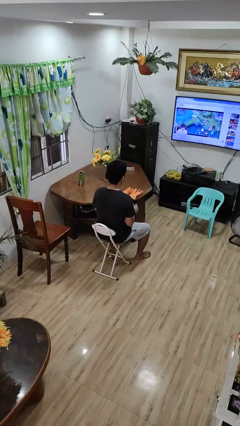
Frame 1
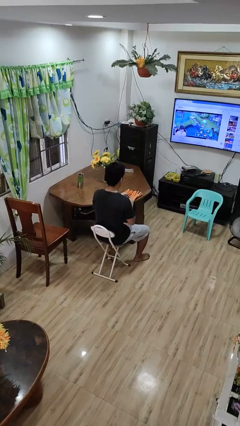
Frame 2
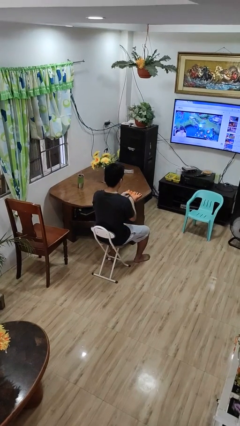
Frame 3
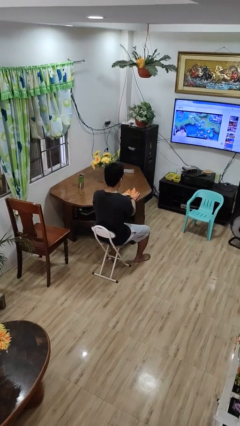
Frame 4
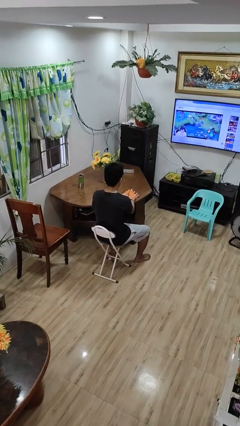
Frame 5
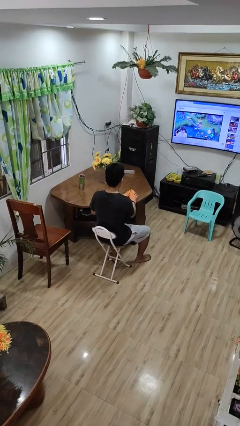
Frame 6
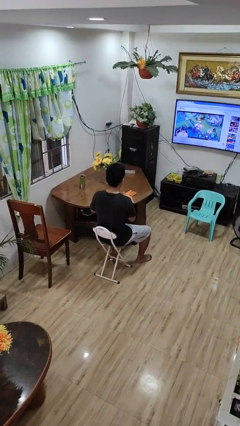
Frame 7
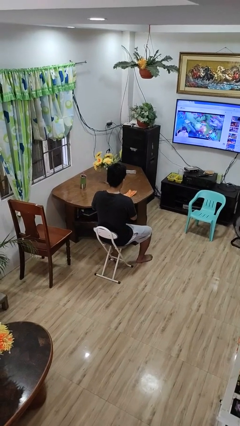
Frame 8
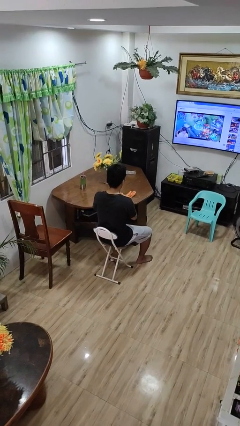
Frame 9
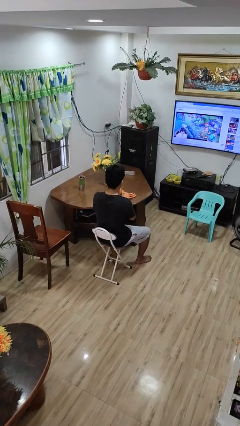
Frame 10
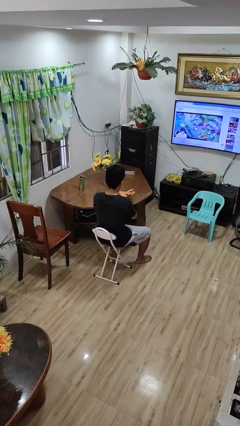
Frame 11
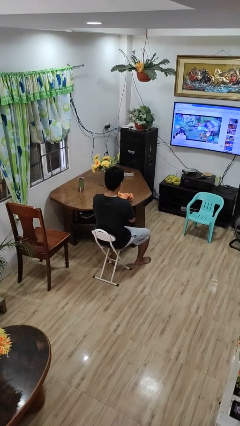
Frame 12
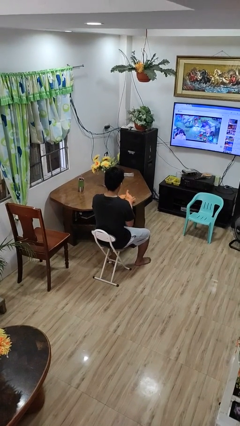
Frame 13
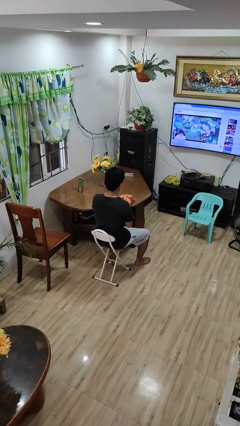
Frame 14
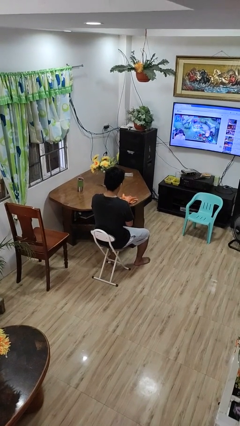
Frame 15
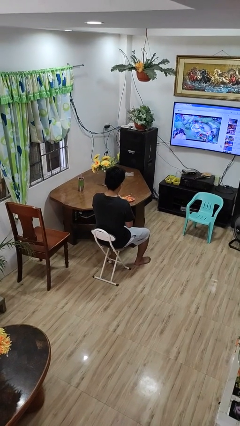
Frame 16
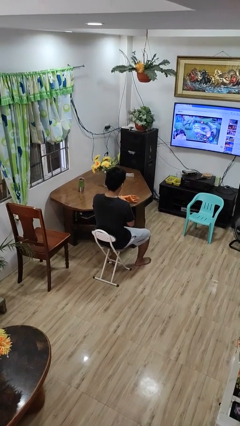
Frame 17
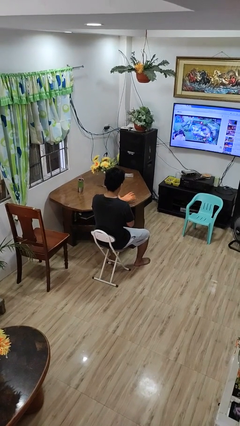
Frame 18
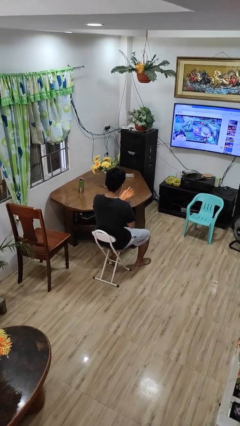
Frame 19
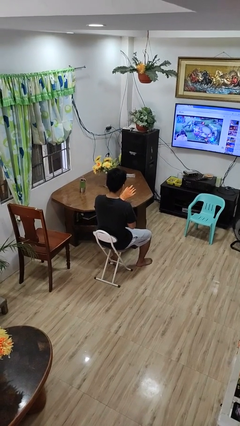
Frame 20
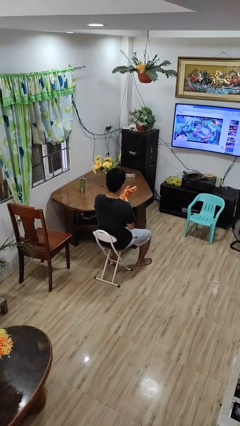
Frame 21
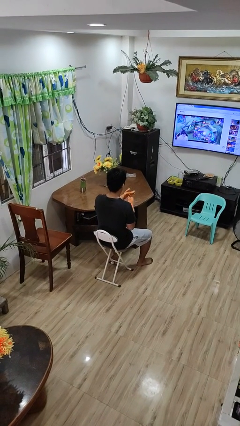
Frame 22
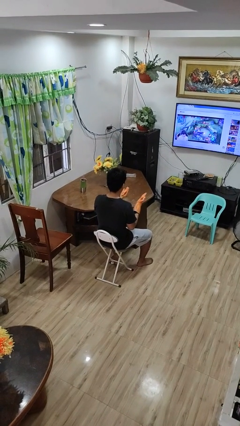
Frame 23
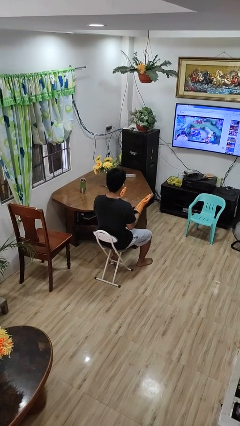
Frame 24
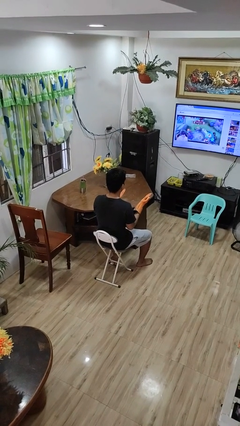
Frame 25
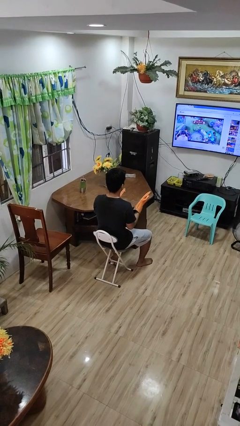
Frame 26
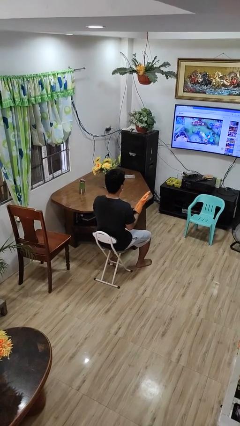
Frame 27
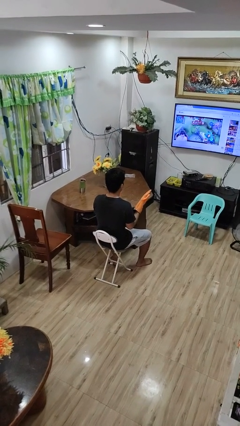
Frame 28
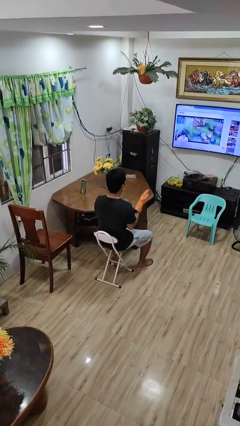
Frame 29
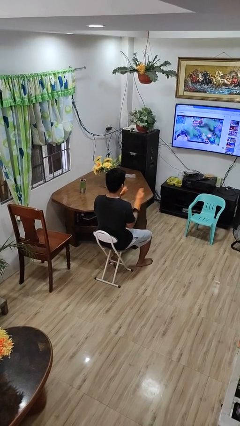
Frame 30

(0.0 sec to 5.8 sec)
person puts on gloves

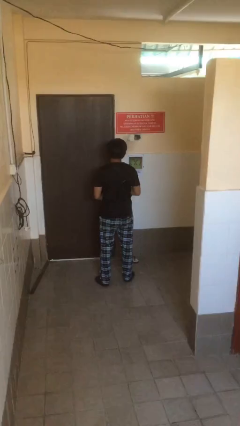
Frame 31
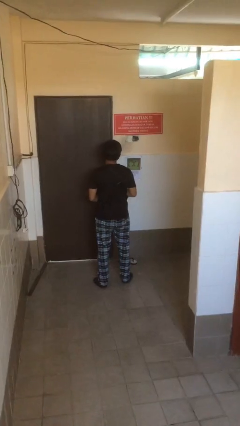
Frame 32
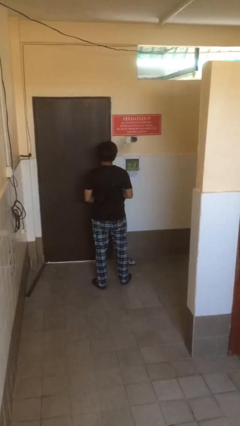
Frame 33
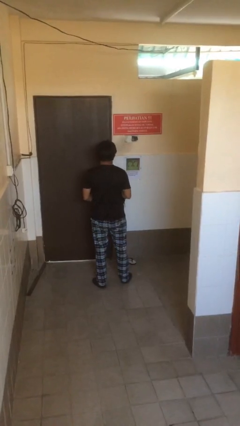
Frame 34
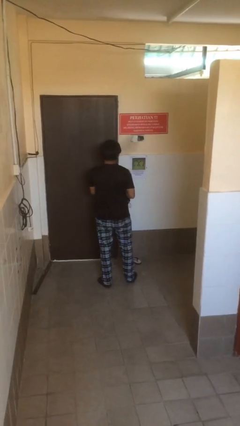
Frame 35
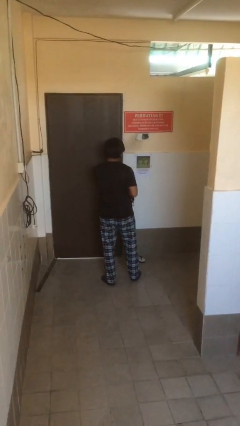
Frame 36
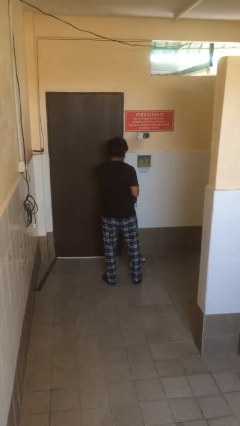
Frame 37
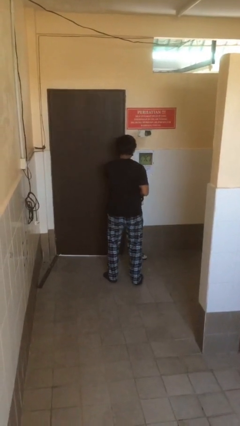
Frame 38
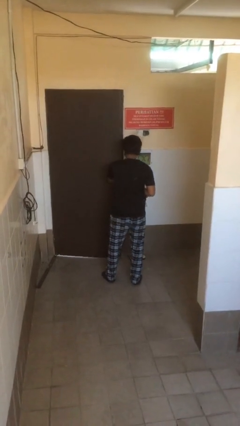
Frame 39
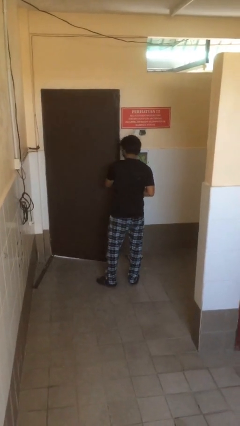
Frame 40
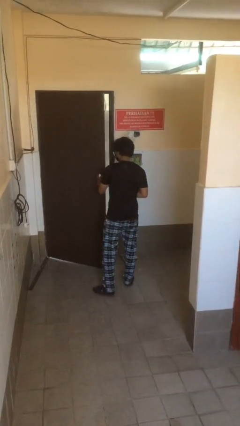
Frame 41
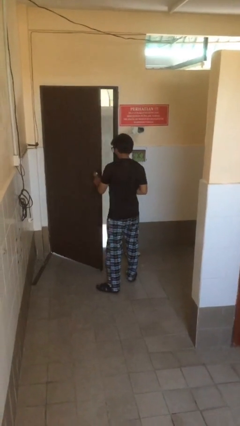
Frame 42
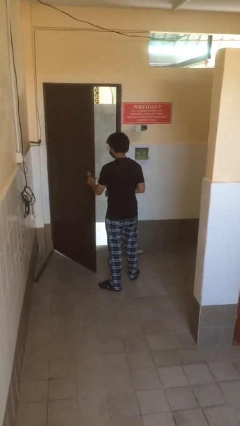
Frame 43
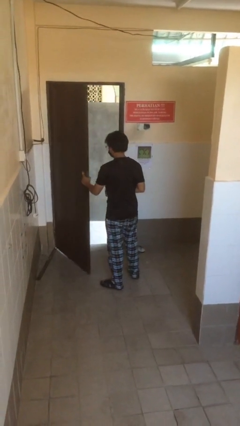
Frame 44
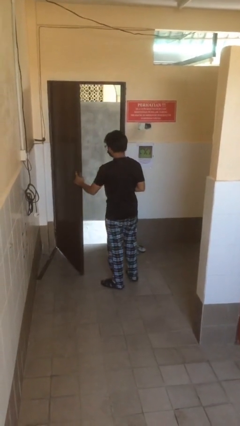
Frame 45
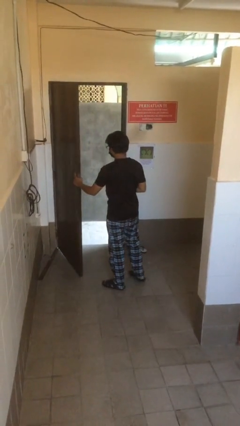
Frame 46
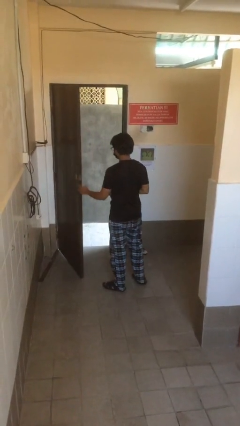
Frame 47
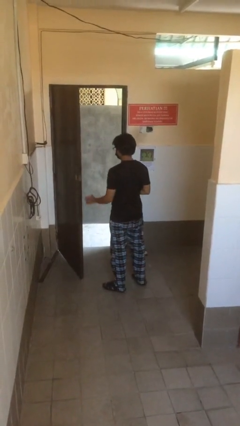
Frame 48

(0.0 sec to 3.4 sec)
person opens facility door

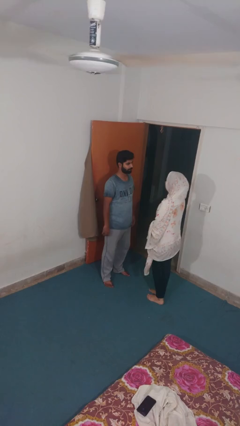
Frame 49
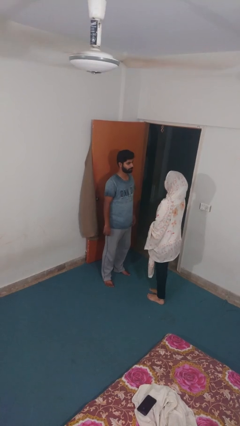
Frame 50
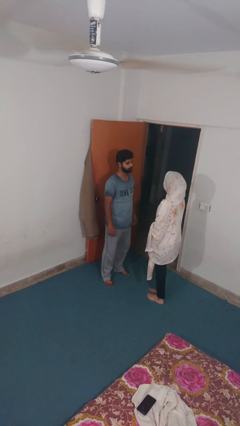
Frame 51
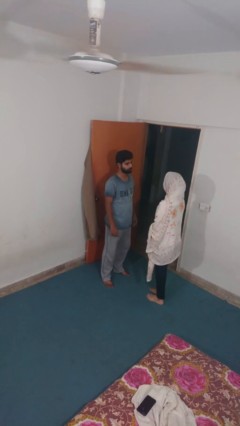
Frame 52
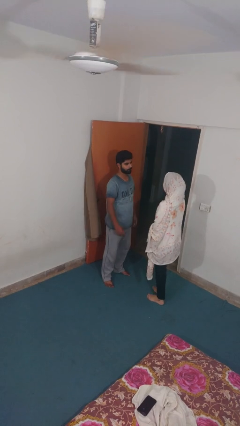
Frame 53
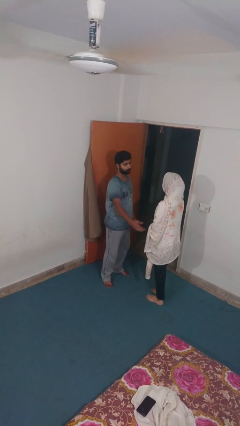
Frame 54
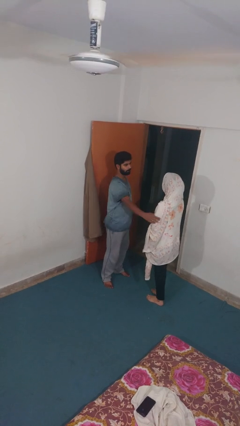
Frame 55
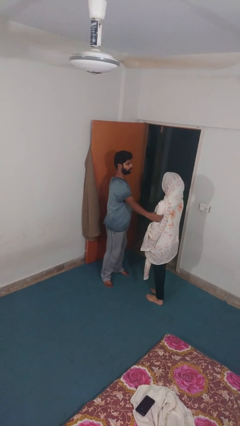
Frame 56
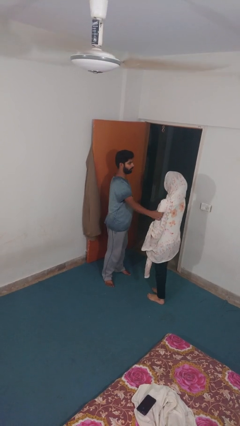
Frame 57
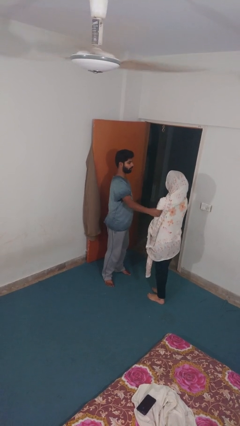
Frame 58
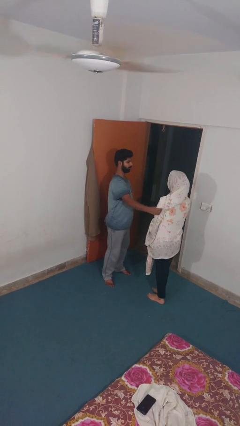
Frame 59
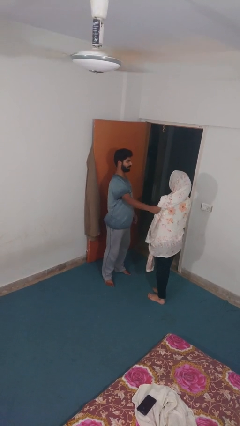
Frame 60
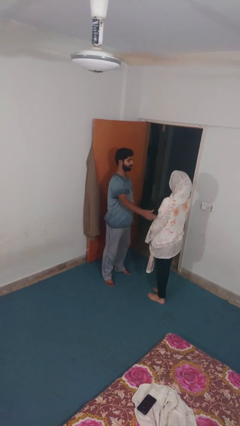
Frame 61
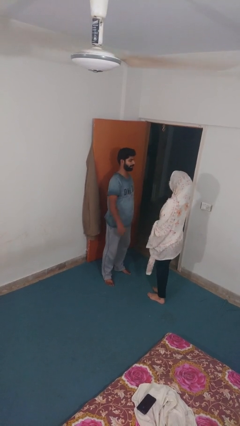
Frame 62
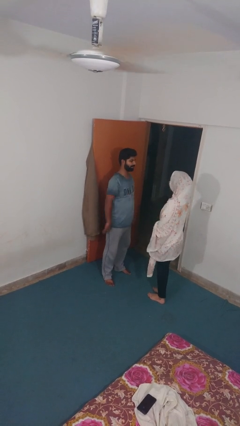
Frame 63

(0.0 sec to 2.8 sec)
person grabs person by bicep

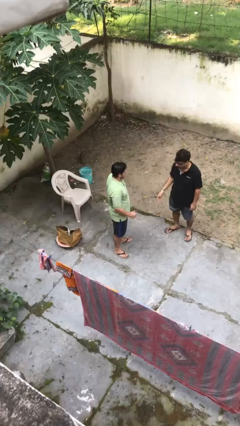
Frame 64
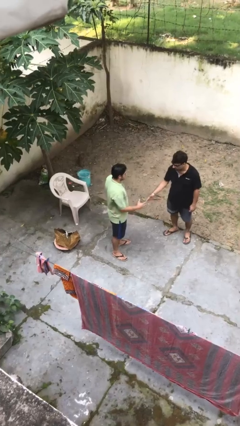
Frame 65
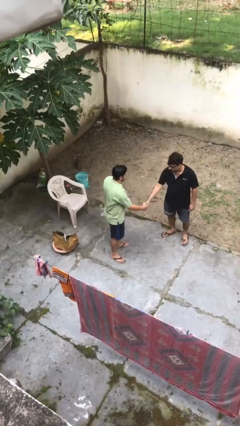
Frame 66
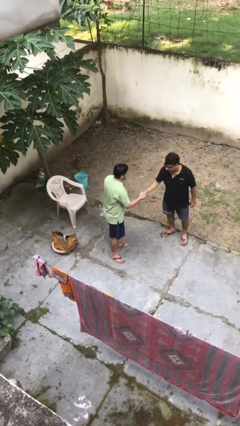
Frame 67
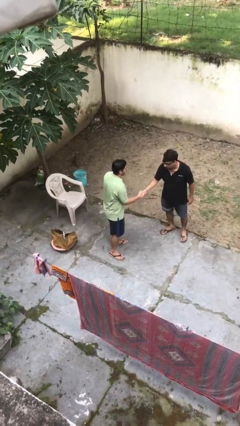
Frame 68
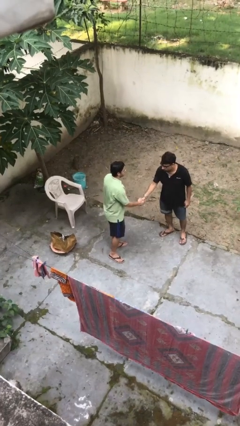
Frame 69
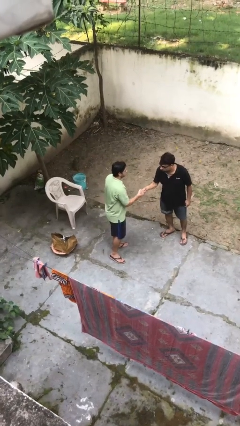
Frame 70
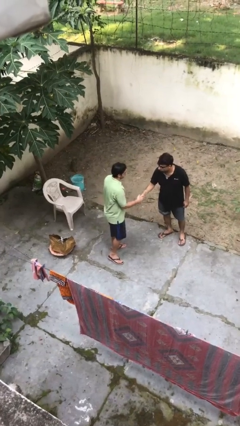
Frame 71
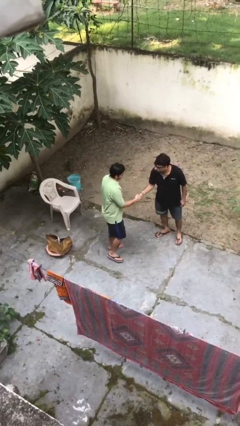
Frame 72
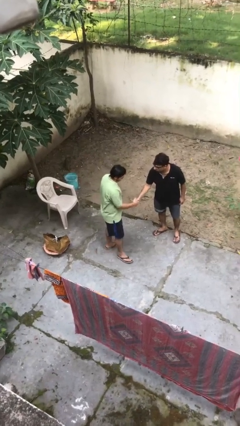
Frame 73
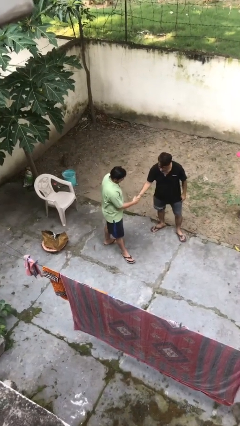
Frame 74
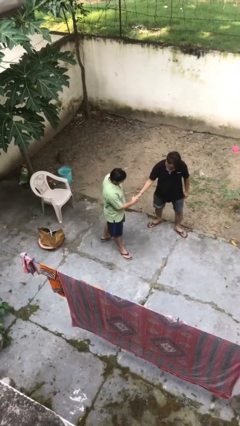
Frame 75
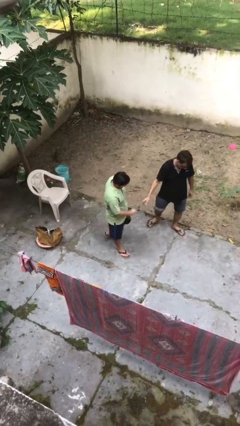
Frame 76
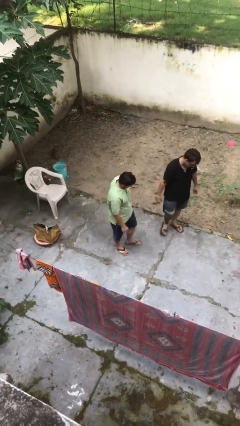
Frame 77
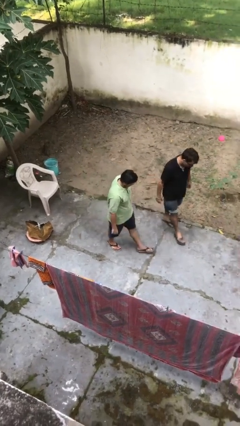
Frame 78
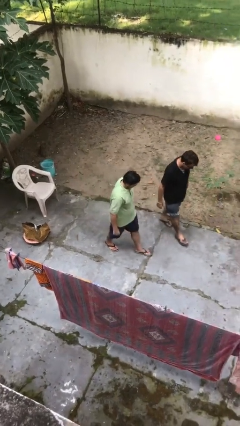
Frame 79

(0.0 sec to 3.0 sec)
person shakes hand

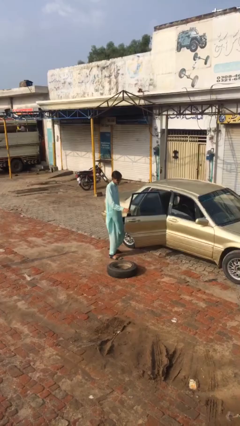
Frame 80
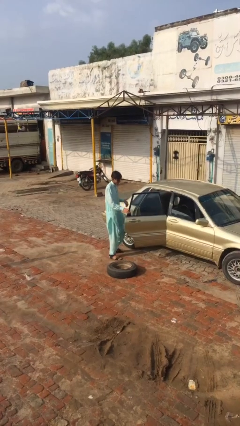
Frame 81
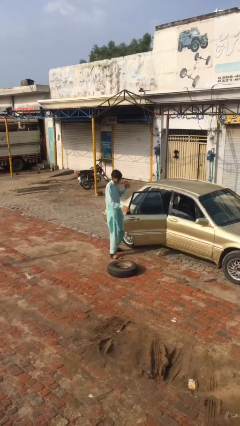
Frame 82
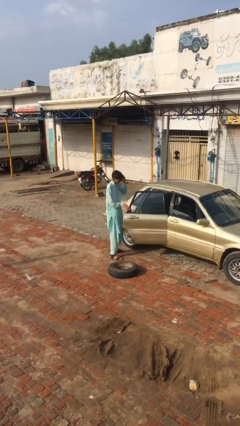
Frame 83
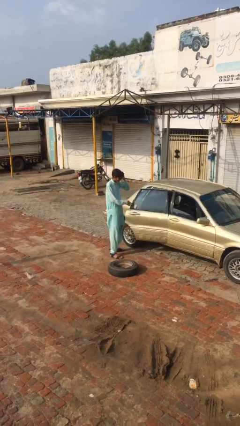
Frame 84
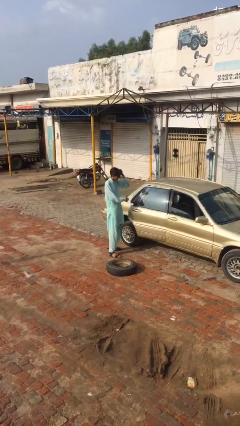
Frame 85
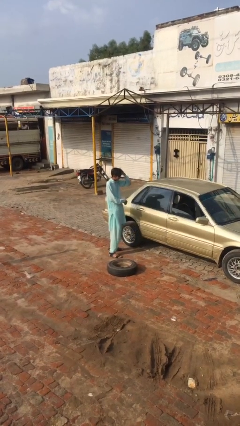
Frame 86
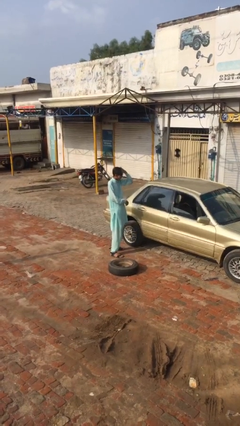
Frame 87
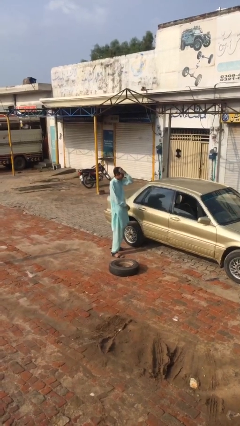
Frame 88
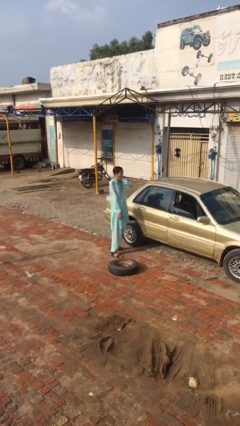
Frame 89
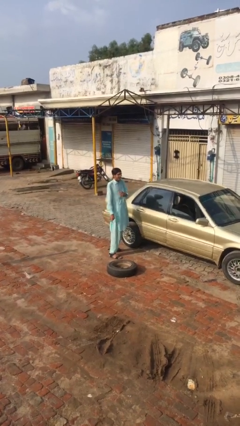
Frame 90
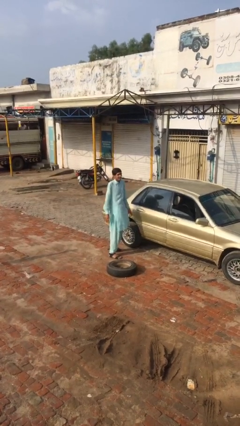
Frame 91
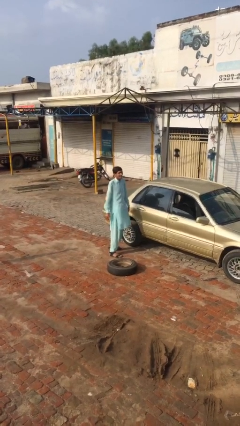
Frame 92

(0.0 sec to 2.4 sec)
person closes car door

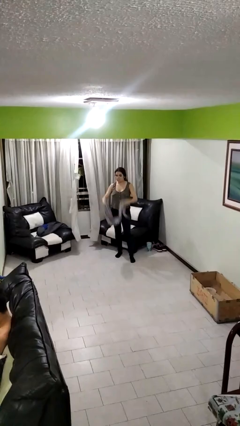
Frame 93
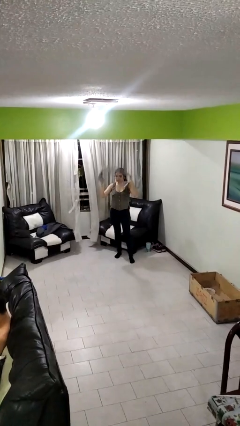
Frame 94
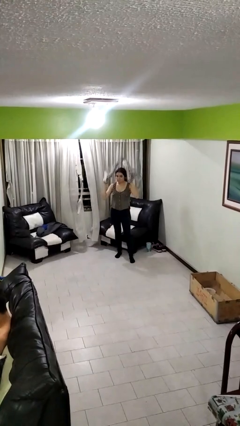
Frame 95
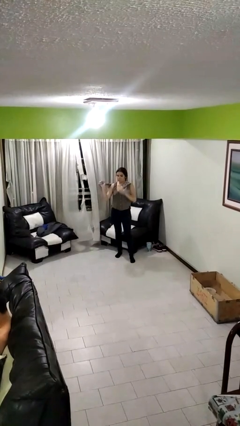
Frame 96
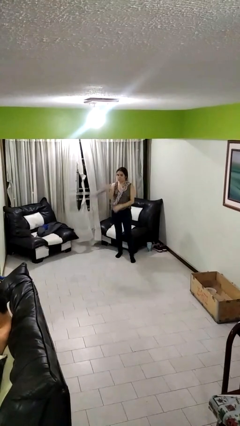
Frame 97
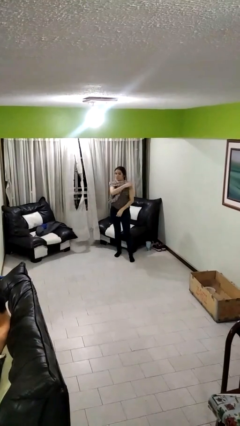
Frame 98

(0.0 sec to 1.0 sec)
person puts on scarf
